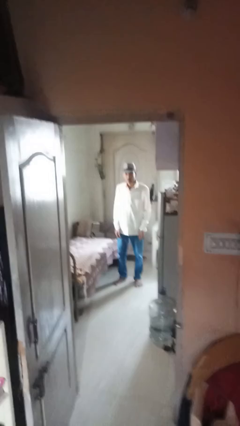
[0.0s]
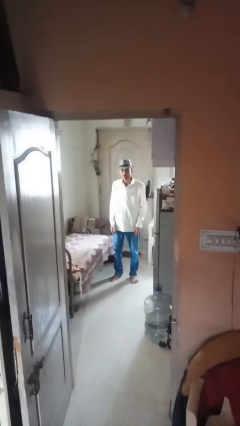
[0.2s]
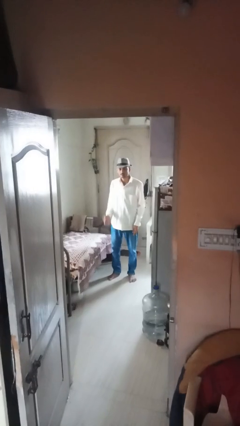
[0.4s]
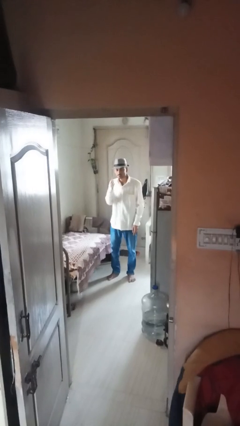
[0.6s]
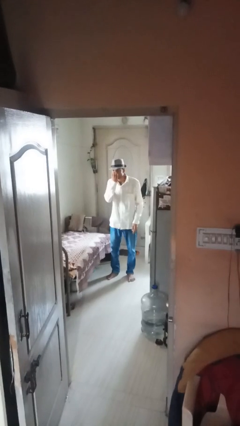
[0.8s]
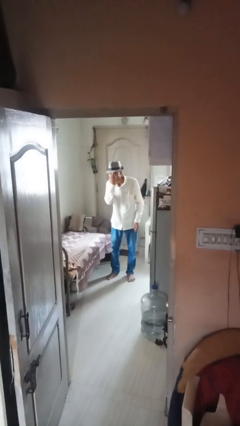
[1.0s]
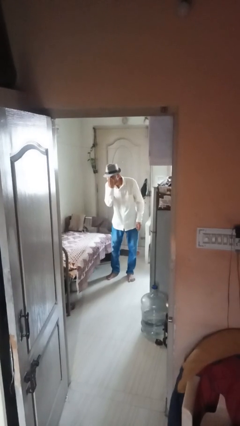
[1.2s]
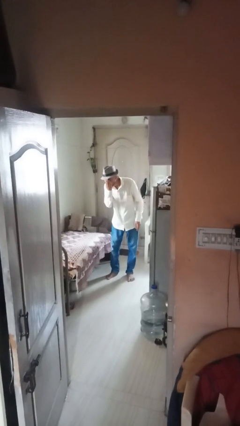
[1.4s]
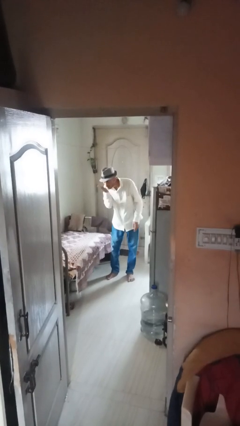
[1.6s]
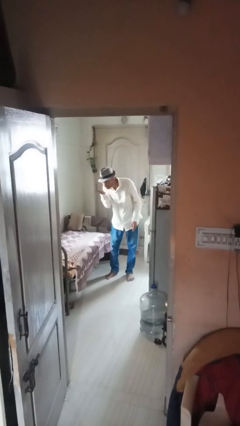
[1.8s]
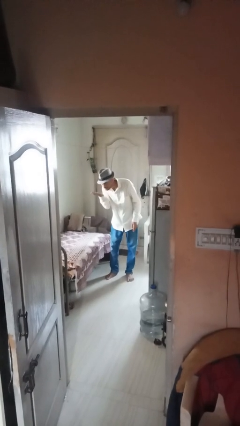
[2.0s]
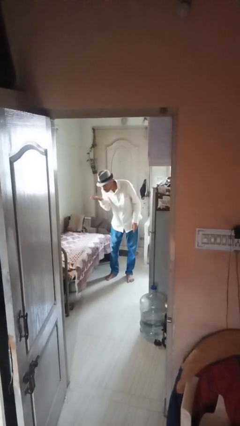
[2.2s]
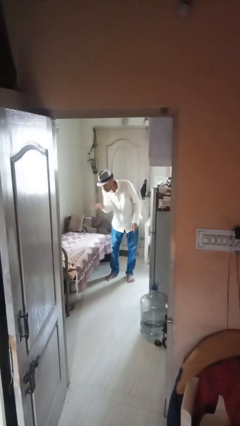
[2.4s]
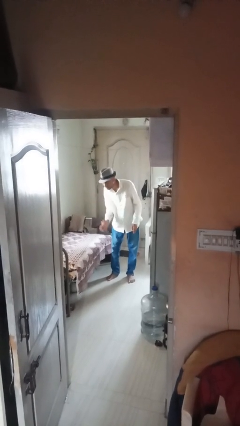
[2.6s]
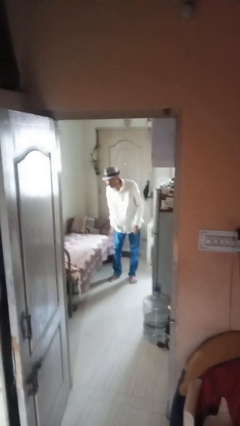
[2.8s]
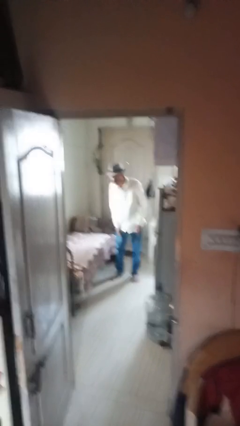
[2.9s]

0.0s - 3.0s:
person gestures blow kiss

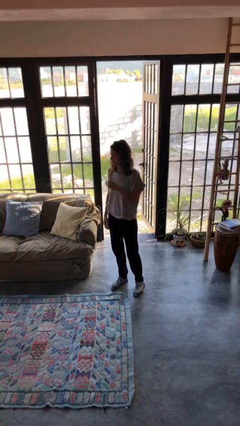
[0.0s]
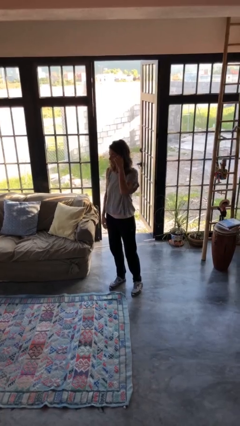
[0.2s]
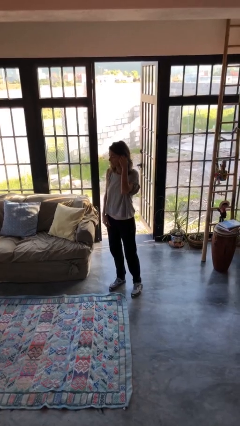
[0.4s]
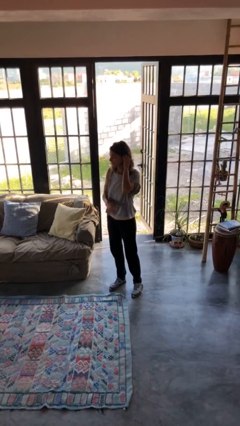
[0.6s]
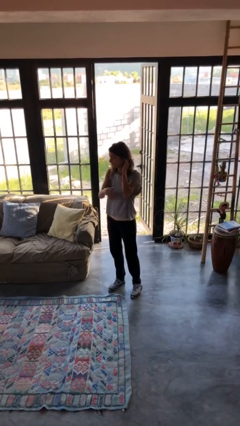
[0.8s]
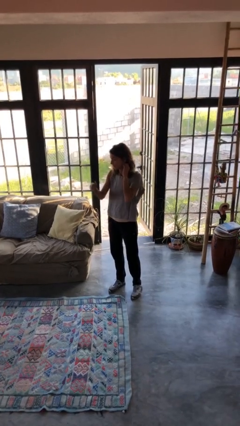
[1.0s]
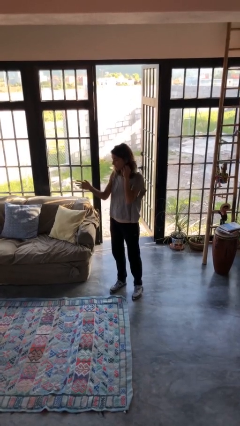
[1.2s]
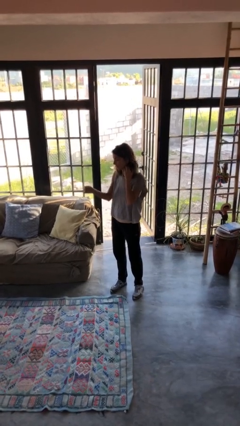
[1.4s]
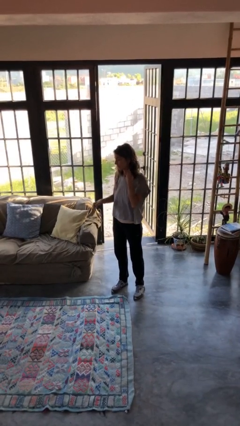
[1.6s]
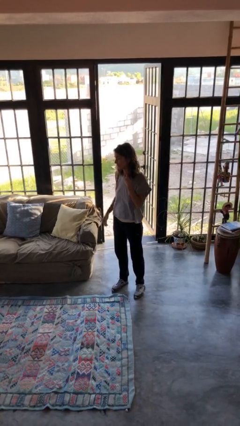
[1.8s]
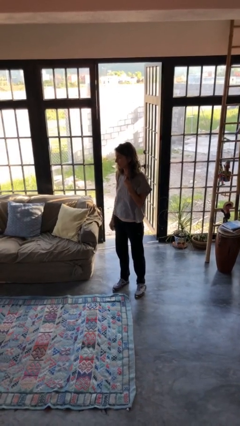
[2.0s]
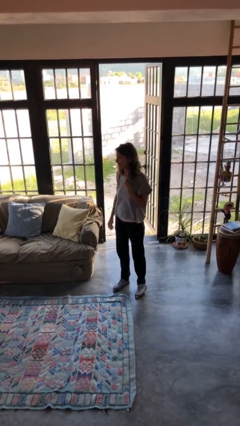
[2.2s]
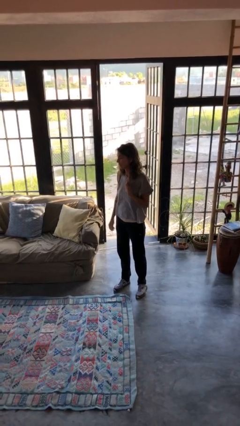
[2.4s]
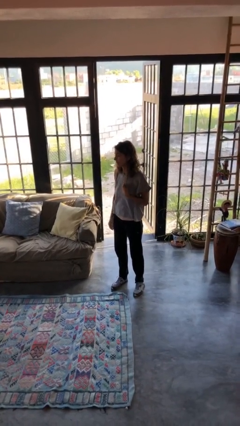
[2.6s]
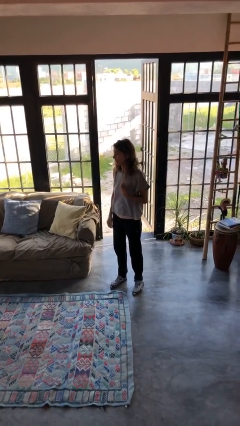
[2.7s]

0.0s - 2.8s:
person gestures swipe right

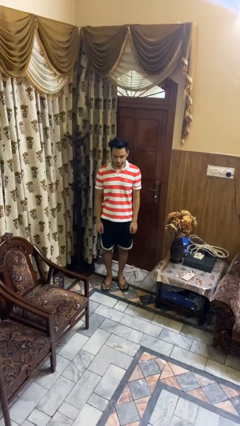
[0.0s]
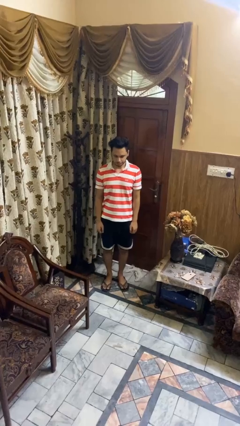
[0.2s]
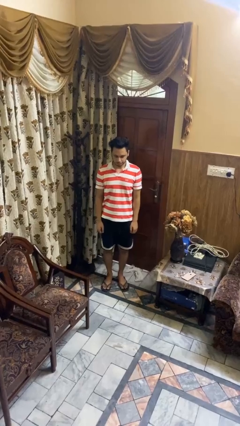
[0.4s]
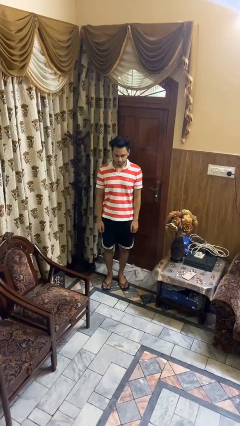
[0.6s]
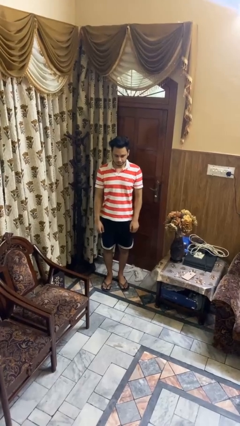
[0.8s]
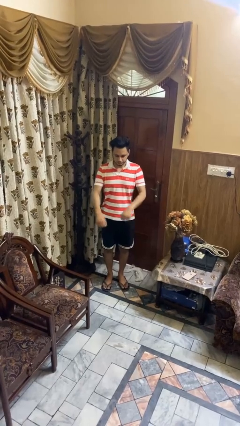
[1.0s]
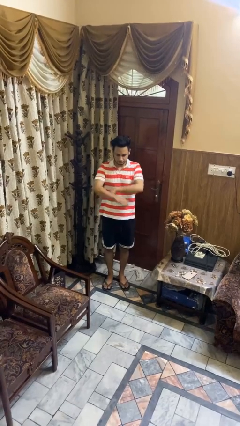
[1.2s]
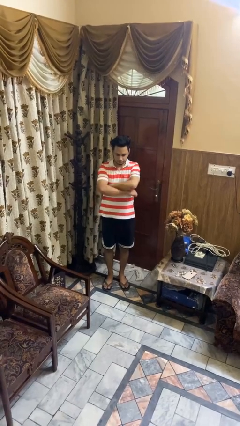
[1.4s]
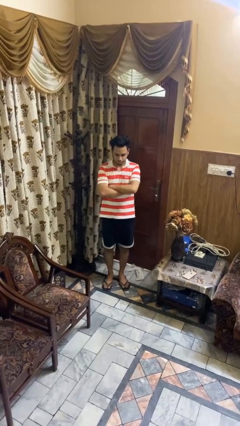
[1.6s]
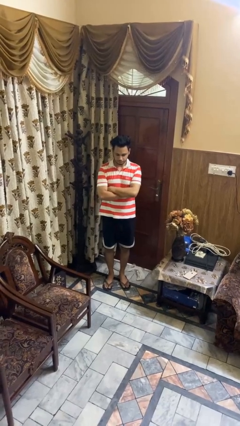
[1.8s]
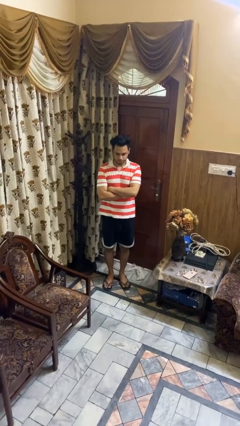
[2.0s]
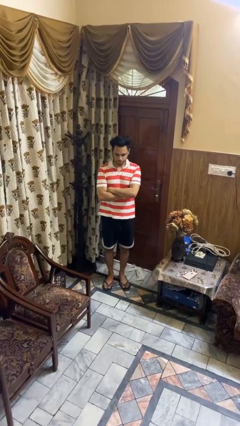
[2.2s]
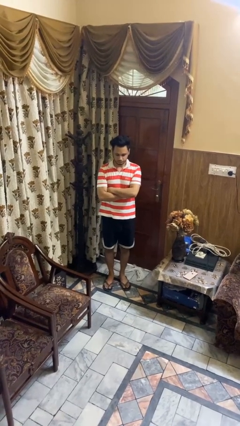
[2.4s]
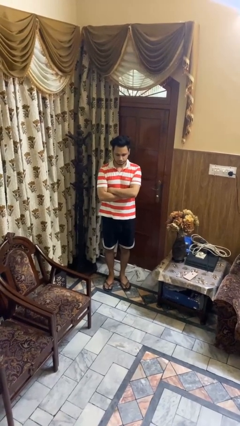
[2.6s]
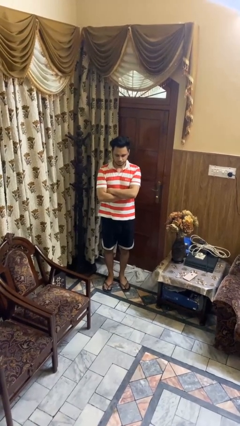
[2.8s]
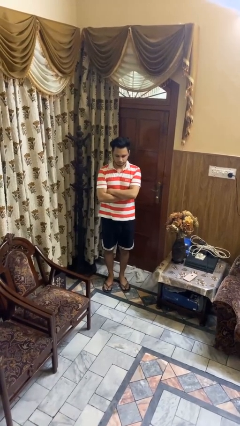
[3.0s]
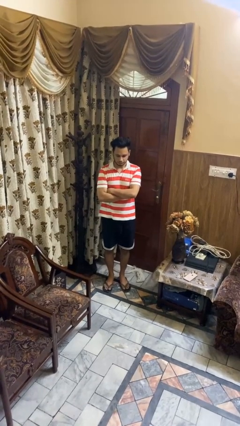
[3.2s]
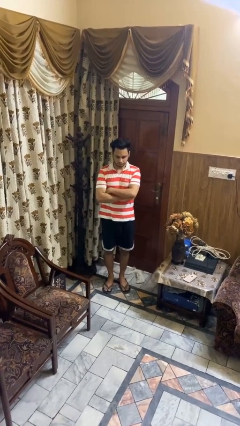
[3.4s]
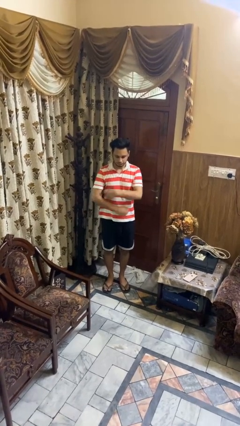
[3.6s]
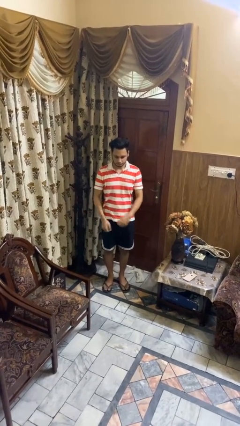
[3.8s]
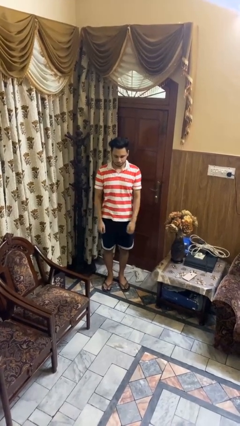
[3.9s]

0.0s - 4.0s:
person crosses arms

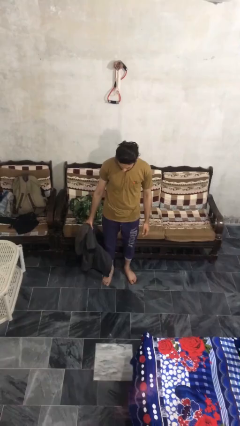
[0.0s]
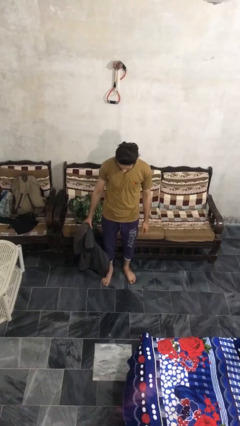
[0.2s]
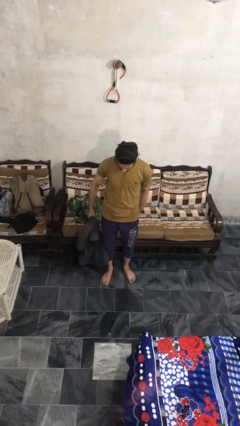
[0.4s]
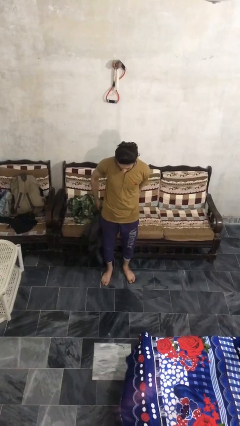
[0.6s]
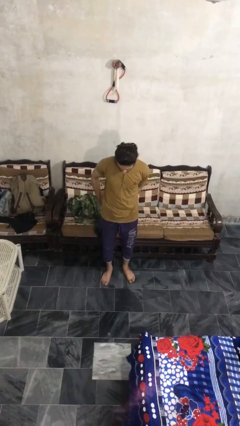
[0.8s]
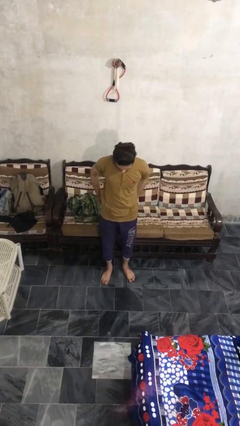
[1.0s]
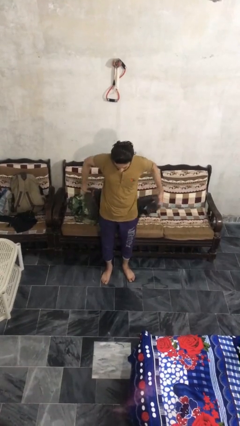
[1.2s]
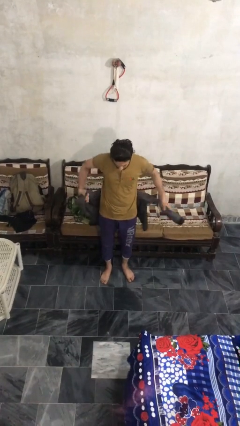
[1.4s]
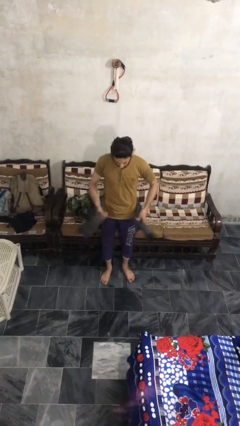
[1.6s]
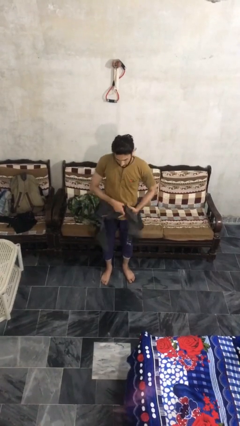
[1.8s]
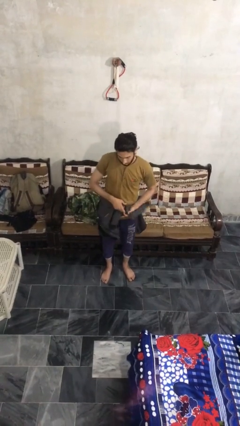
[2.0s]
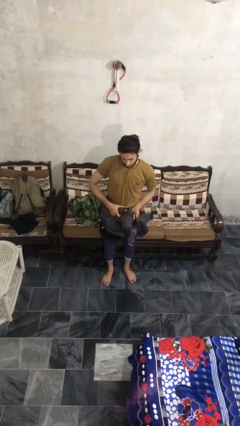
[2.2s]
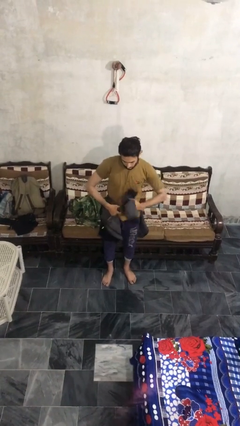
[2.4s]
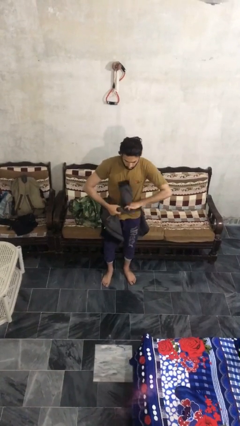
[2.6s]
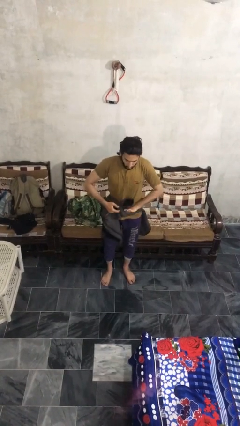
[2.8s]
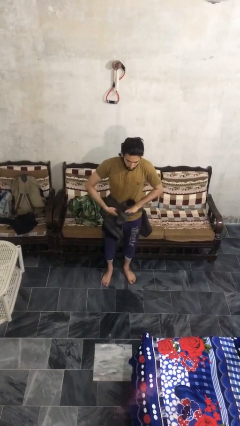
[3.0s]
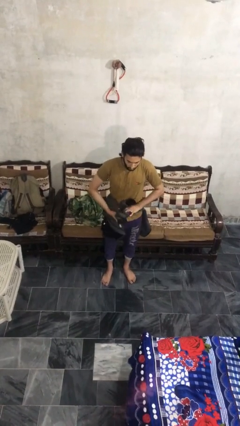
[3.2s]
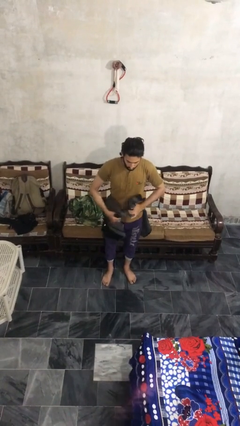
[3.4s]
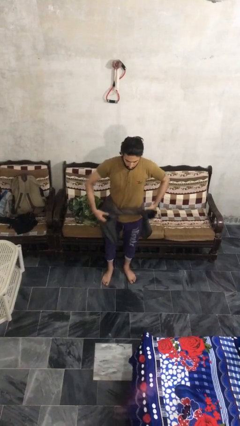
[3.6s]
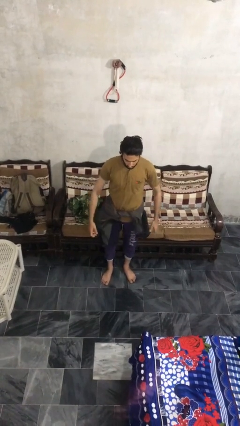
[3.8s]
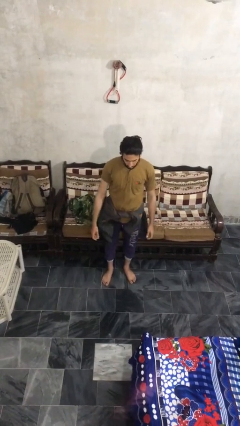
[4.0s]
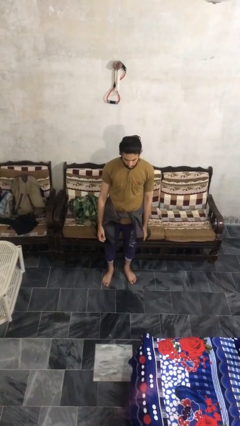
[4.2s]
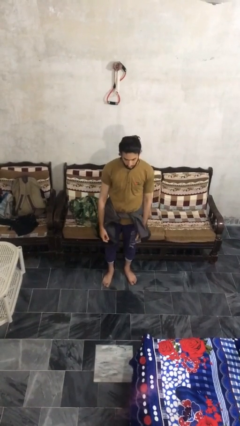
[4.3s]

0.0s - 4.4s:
person ties jacket around waist

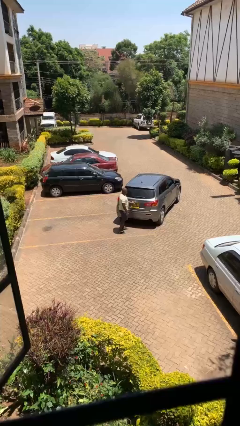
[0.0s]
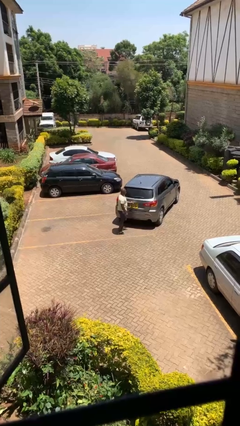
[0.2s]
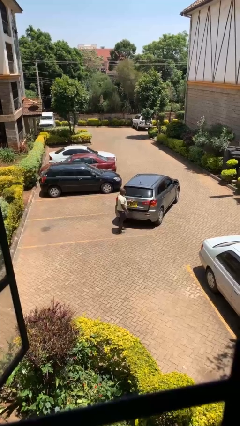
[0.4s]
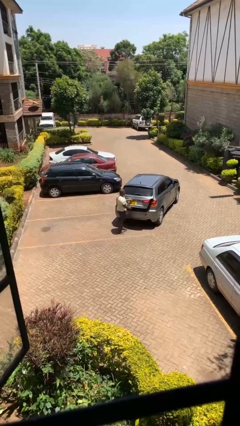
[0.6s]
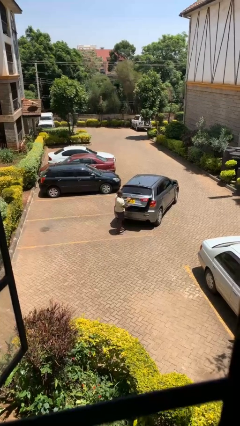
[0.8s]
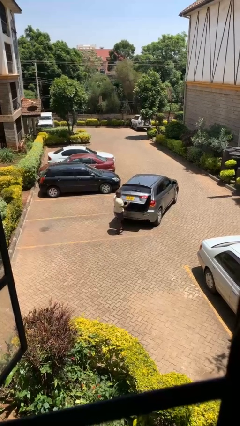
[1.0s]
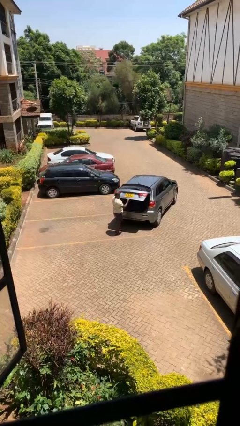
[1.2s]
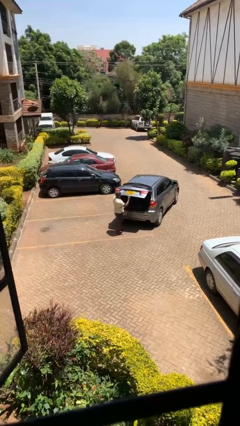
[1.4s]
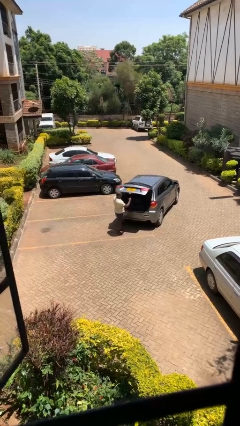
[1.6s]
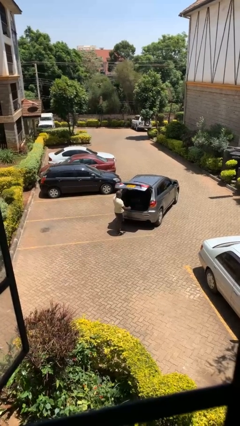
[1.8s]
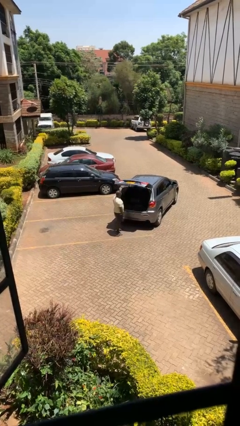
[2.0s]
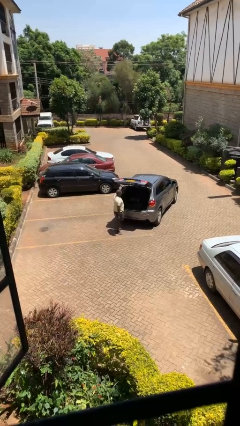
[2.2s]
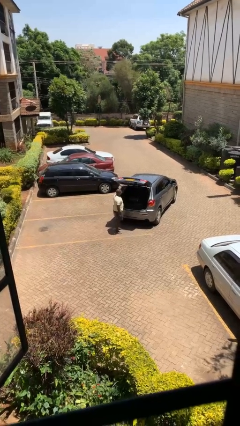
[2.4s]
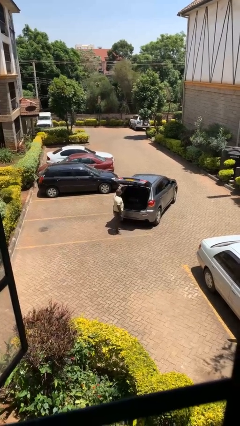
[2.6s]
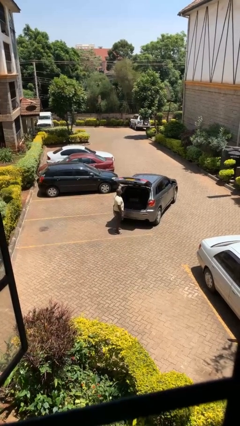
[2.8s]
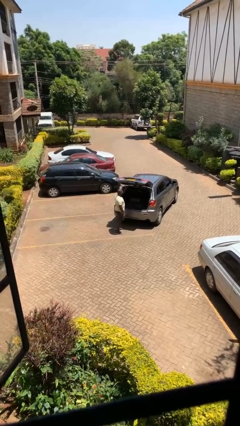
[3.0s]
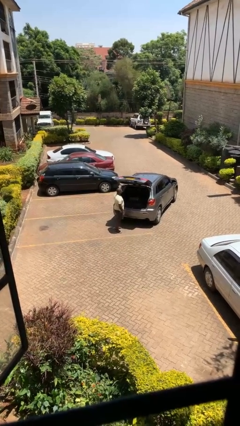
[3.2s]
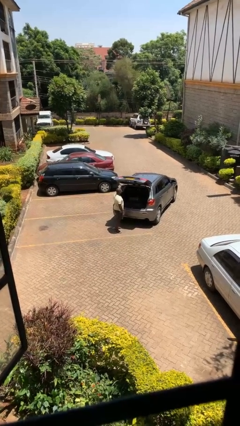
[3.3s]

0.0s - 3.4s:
person opens car trunk
